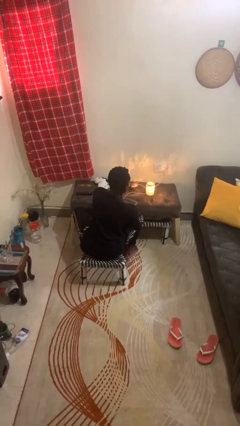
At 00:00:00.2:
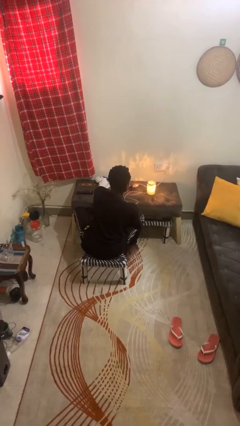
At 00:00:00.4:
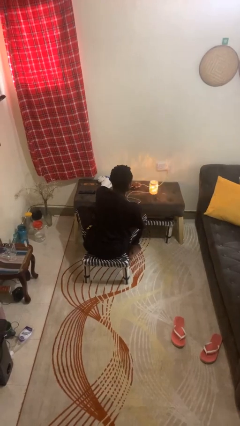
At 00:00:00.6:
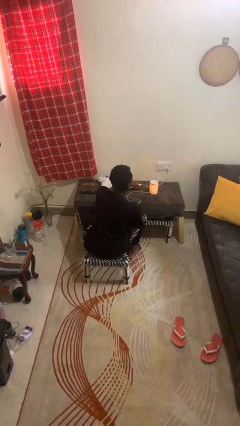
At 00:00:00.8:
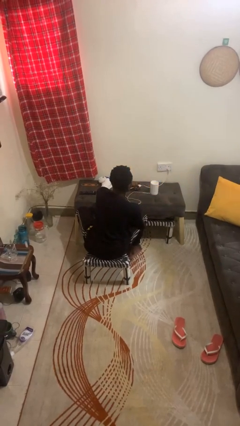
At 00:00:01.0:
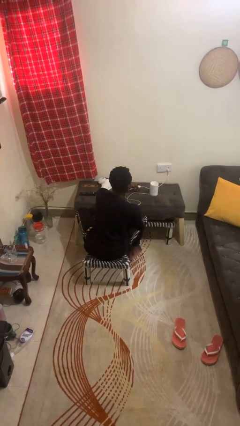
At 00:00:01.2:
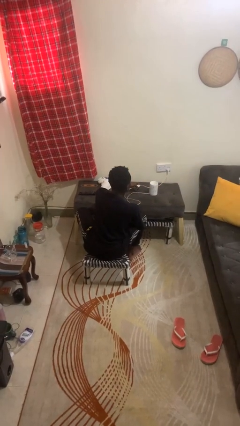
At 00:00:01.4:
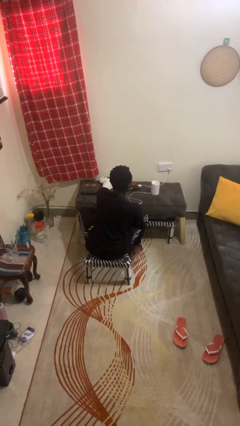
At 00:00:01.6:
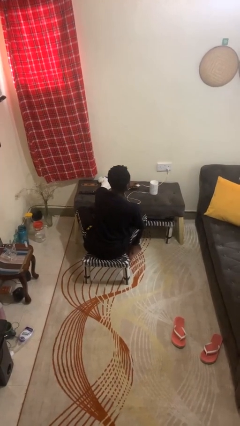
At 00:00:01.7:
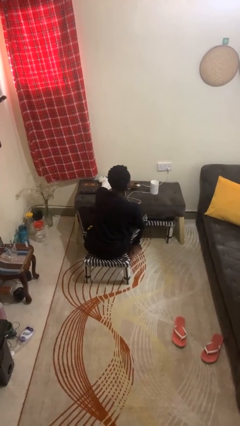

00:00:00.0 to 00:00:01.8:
person turns off lamp

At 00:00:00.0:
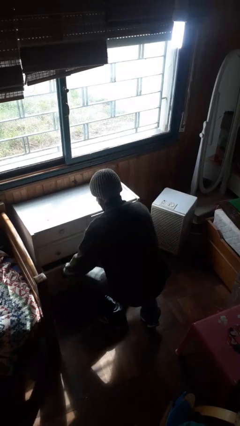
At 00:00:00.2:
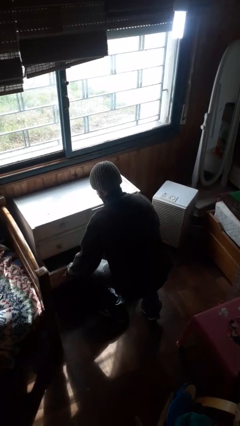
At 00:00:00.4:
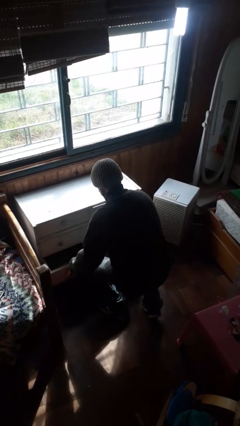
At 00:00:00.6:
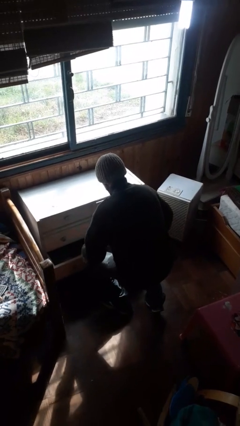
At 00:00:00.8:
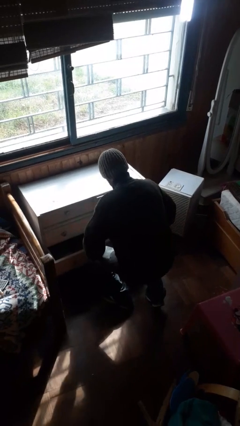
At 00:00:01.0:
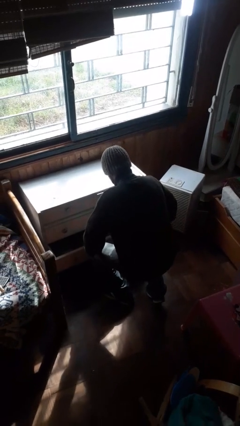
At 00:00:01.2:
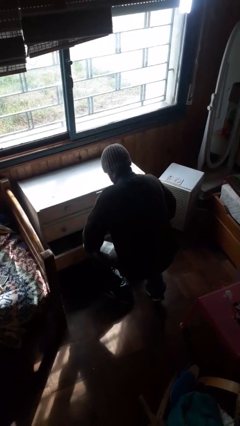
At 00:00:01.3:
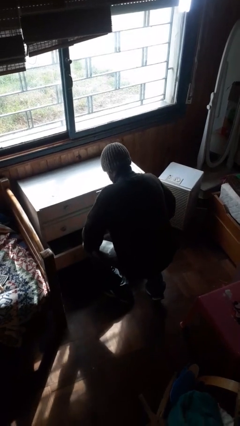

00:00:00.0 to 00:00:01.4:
person opens dresser drawer

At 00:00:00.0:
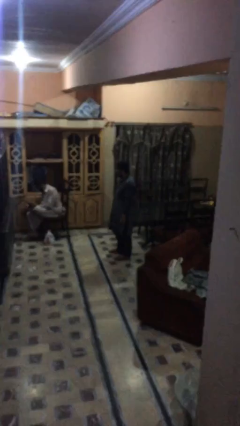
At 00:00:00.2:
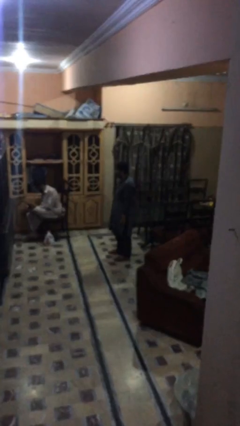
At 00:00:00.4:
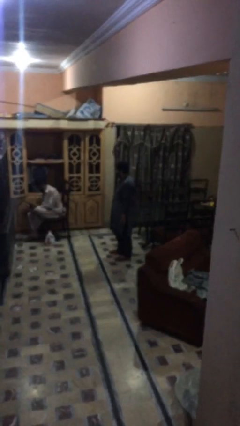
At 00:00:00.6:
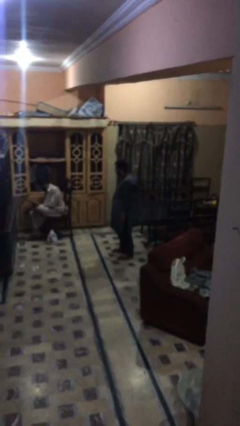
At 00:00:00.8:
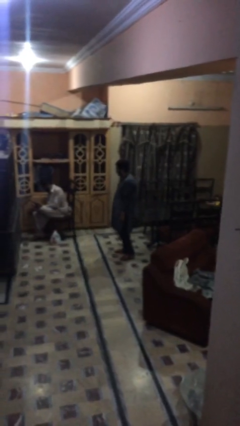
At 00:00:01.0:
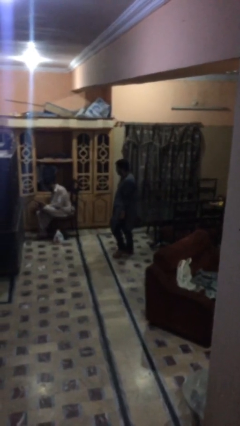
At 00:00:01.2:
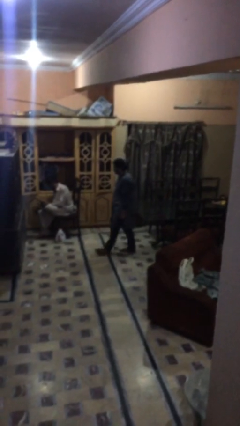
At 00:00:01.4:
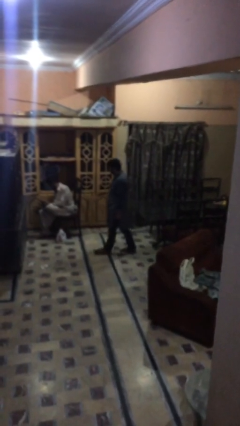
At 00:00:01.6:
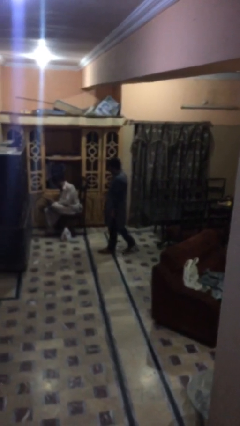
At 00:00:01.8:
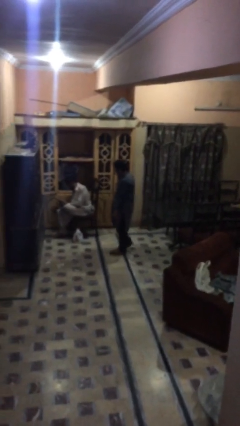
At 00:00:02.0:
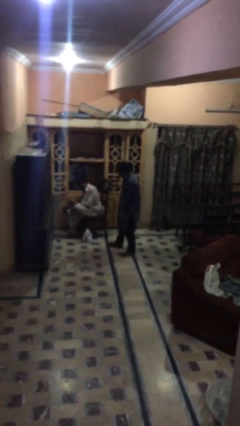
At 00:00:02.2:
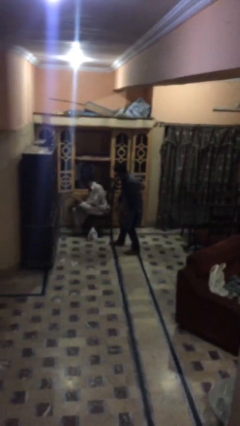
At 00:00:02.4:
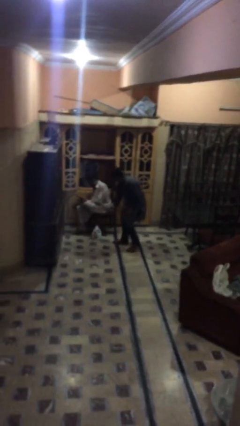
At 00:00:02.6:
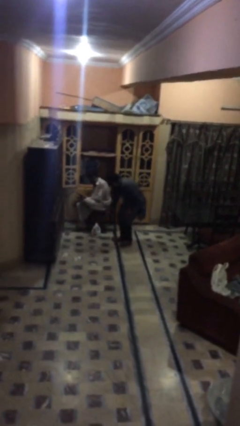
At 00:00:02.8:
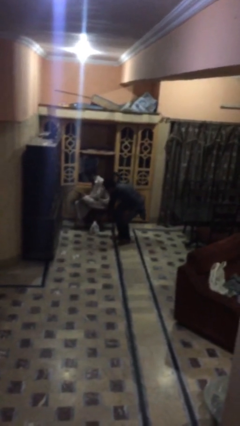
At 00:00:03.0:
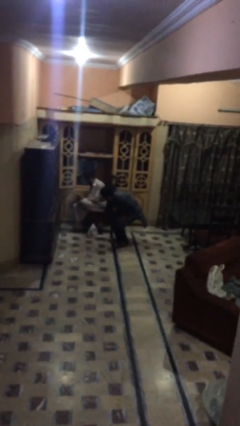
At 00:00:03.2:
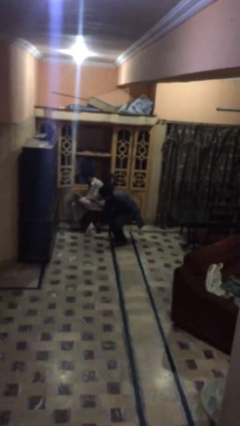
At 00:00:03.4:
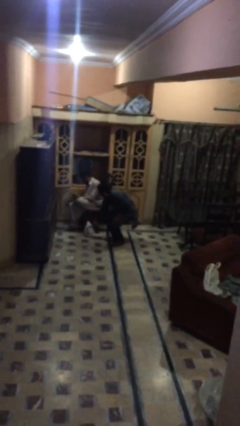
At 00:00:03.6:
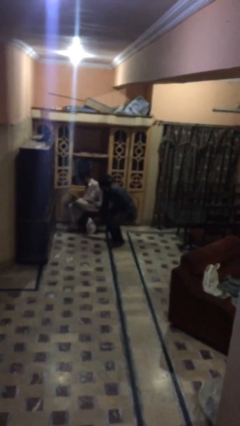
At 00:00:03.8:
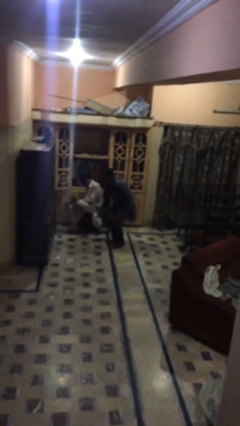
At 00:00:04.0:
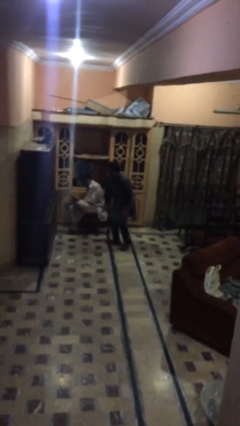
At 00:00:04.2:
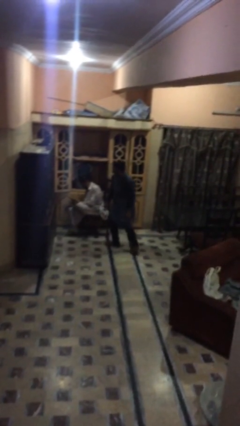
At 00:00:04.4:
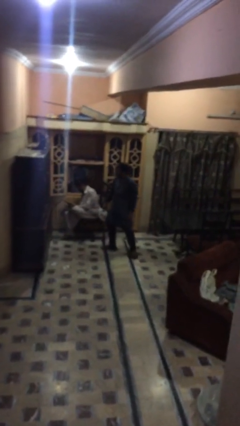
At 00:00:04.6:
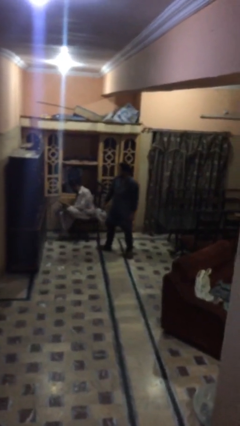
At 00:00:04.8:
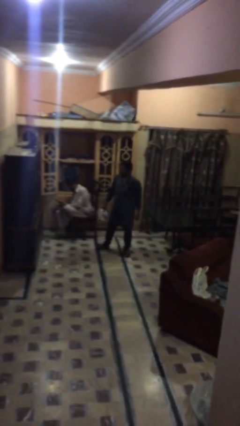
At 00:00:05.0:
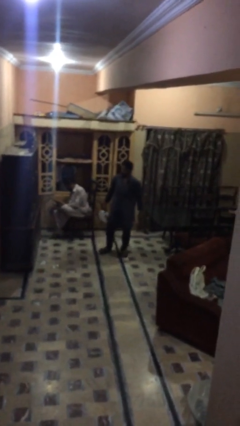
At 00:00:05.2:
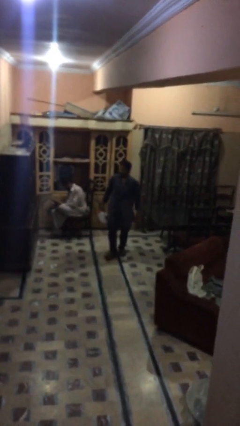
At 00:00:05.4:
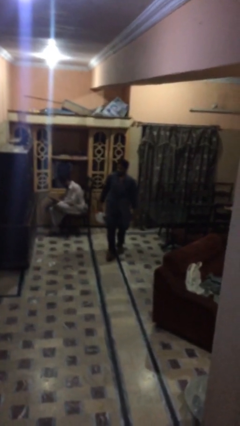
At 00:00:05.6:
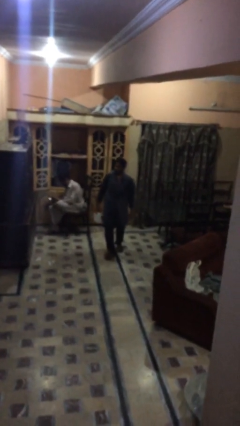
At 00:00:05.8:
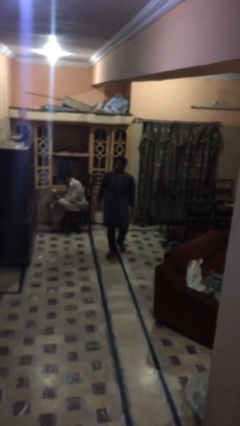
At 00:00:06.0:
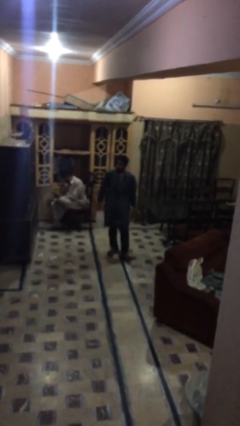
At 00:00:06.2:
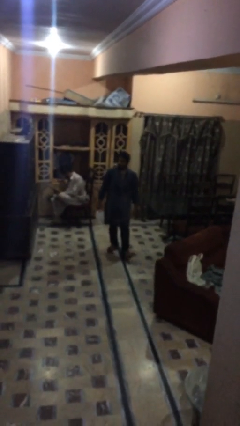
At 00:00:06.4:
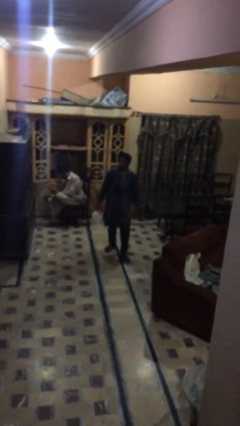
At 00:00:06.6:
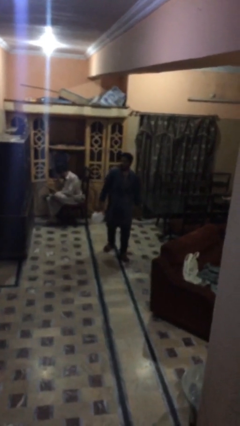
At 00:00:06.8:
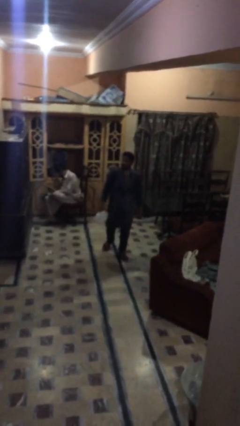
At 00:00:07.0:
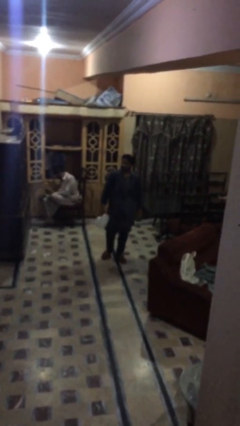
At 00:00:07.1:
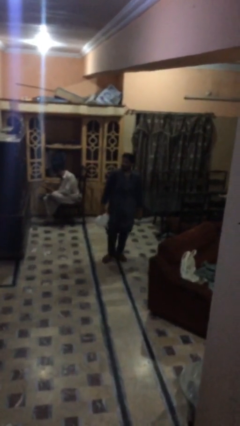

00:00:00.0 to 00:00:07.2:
person steals object from person

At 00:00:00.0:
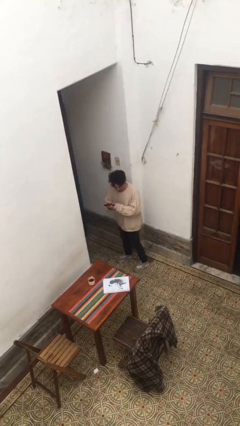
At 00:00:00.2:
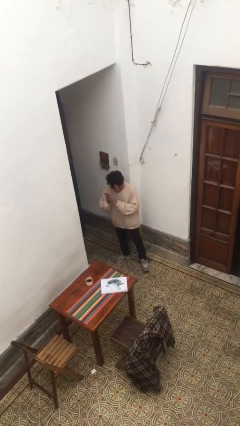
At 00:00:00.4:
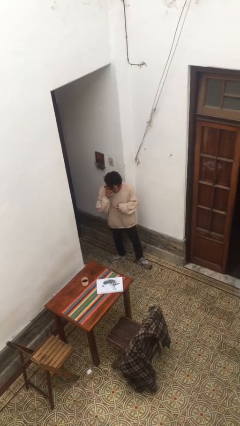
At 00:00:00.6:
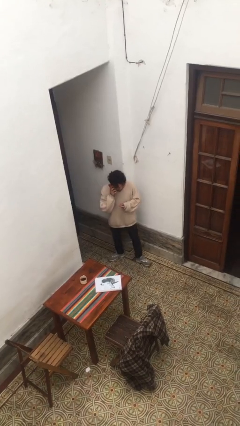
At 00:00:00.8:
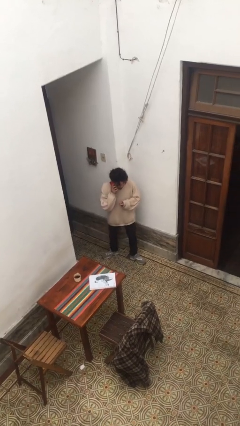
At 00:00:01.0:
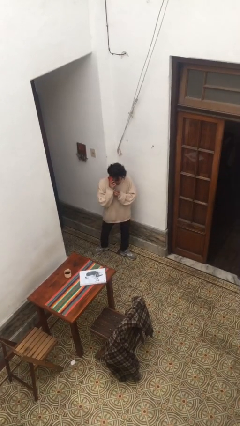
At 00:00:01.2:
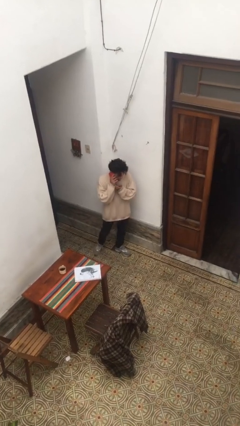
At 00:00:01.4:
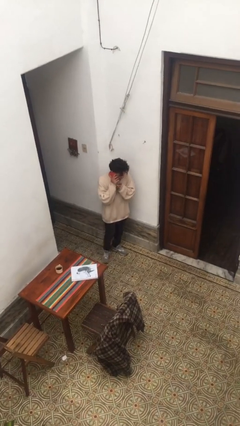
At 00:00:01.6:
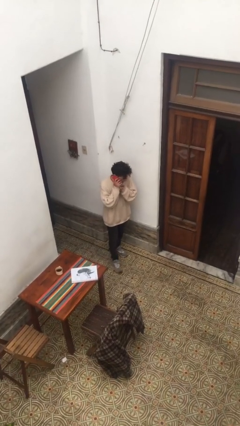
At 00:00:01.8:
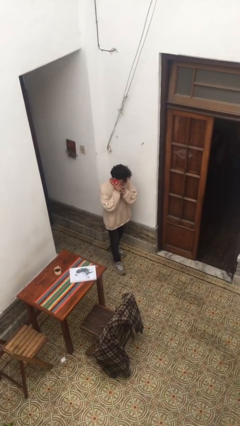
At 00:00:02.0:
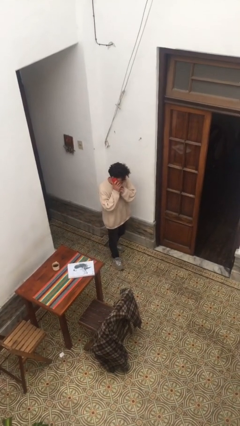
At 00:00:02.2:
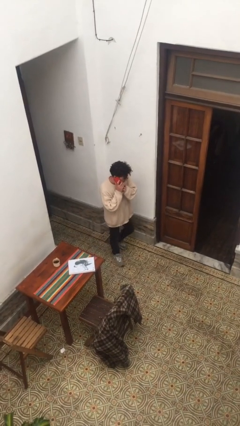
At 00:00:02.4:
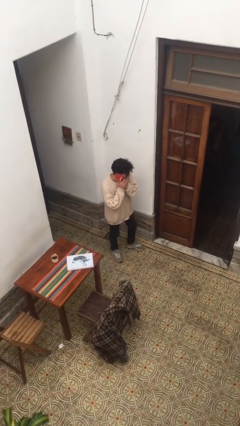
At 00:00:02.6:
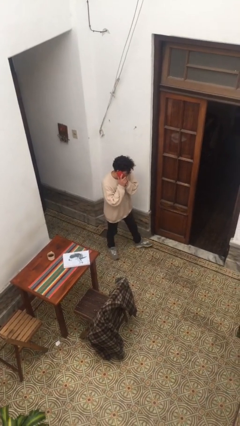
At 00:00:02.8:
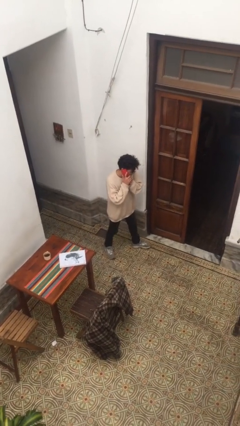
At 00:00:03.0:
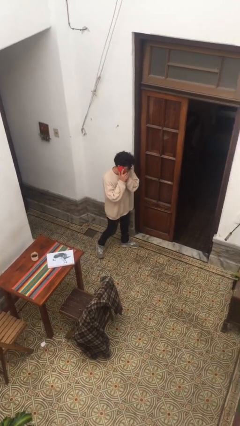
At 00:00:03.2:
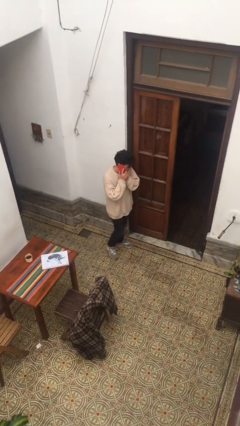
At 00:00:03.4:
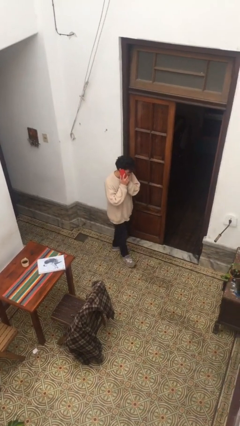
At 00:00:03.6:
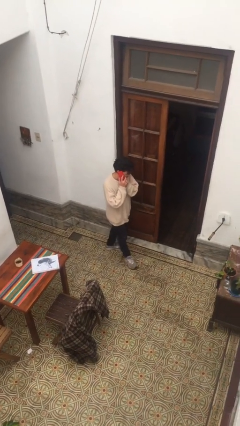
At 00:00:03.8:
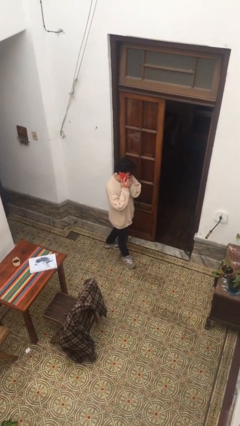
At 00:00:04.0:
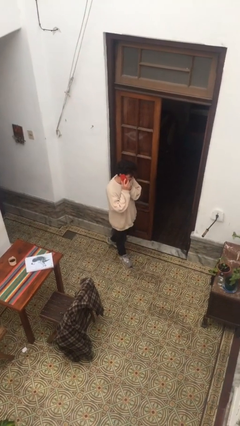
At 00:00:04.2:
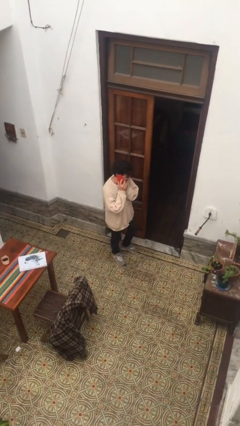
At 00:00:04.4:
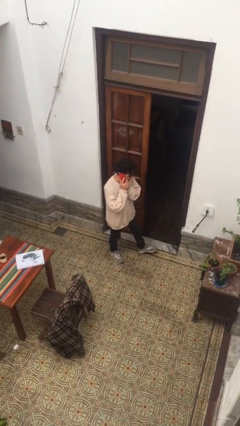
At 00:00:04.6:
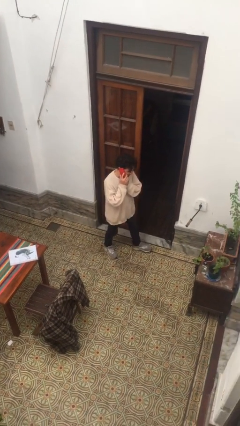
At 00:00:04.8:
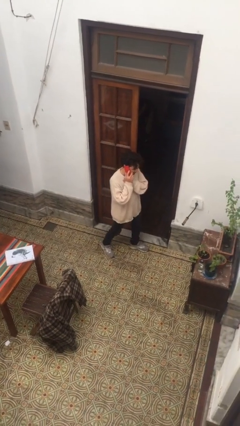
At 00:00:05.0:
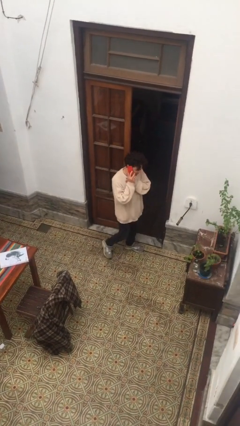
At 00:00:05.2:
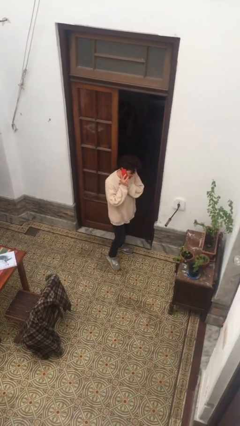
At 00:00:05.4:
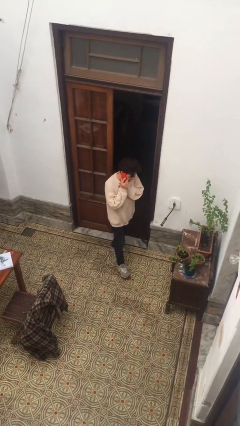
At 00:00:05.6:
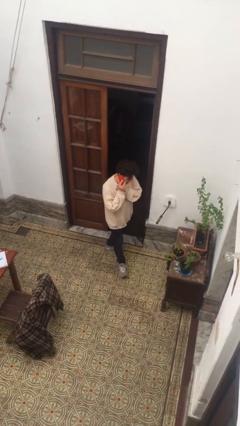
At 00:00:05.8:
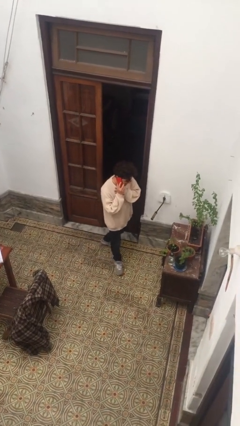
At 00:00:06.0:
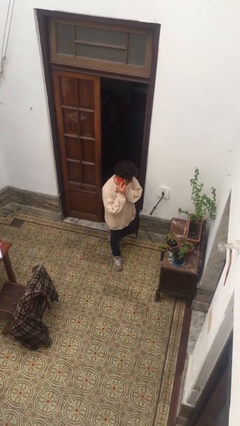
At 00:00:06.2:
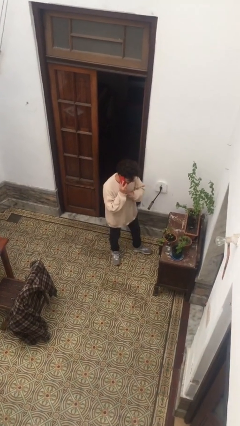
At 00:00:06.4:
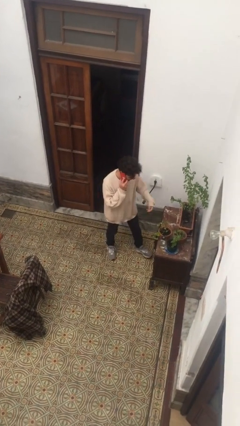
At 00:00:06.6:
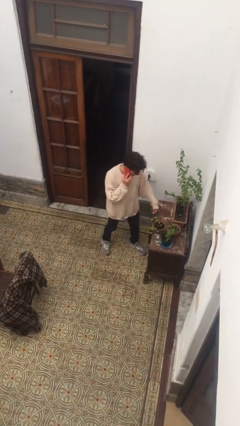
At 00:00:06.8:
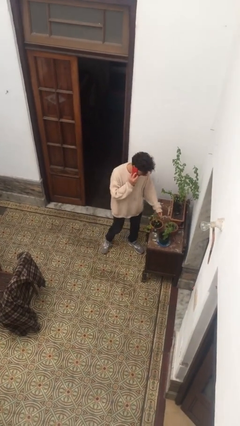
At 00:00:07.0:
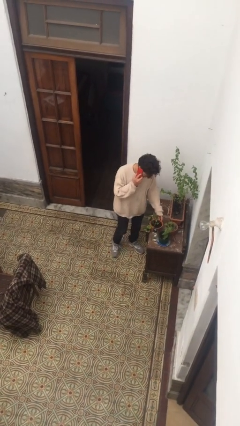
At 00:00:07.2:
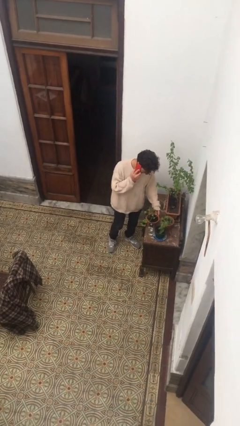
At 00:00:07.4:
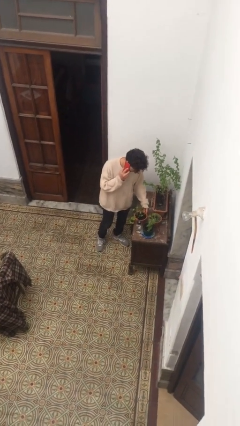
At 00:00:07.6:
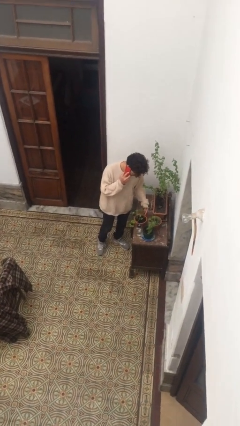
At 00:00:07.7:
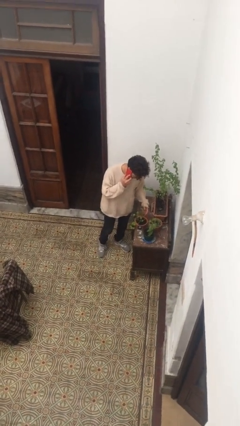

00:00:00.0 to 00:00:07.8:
person talks on phone
